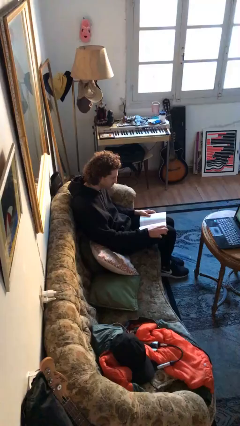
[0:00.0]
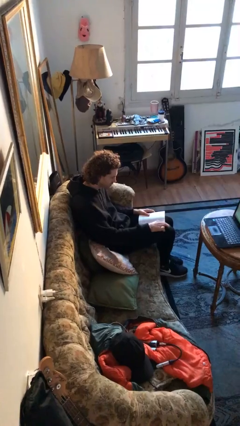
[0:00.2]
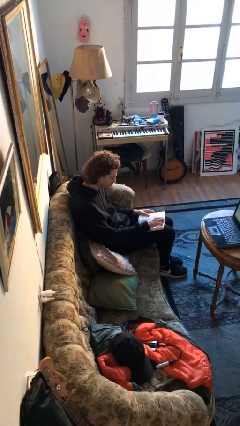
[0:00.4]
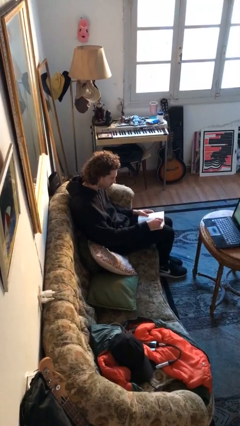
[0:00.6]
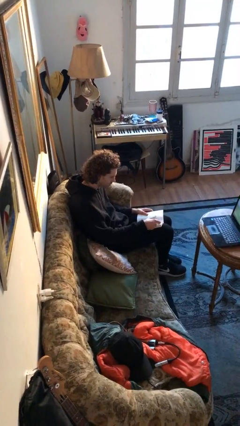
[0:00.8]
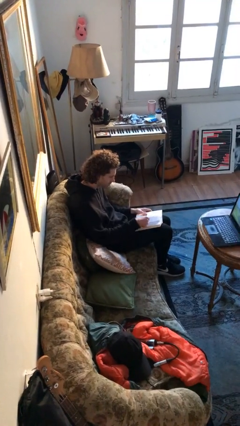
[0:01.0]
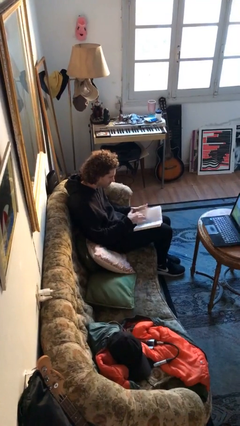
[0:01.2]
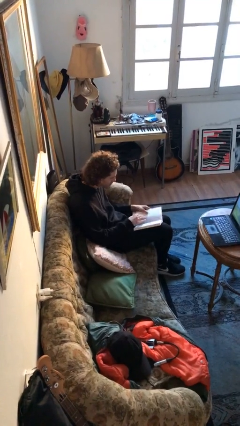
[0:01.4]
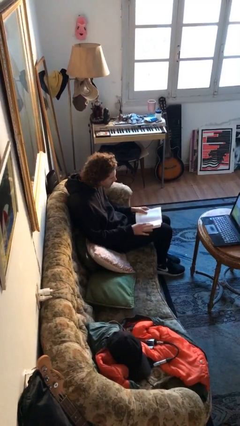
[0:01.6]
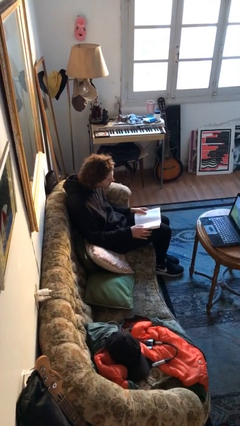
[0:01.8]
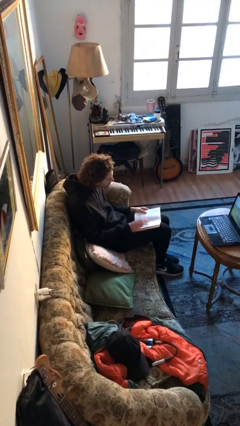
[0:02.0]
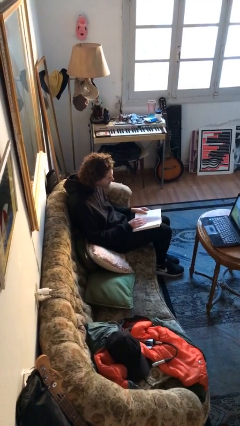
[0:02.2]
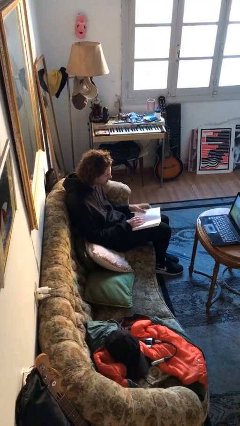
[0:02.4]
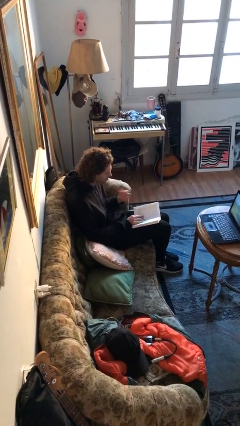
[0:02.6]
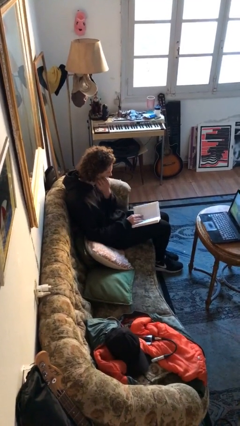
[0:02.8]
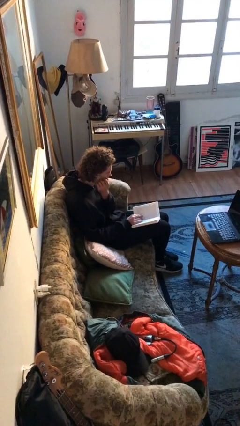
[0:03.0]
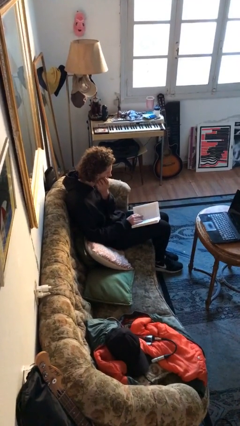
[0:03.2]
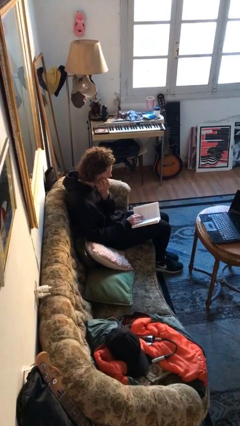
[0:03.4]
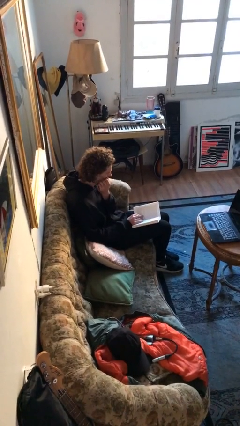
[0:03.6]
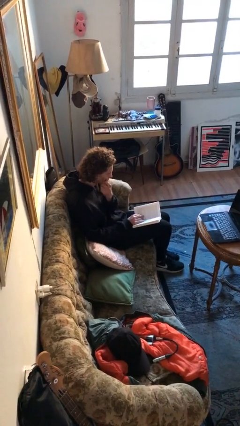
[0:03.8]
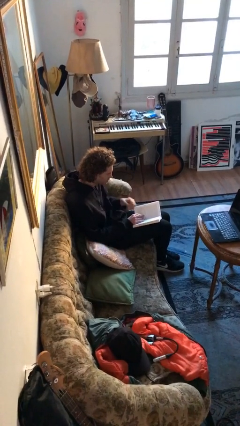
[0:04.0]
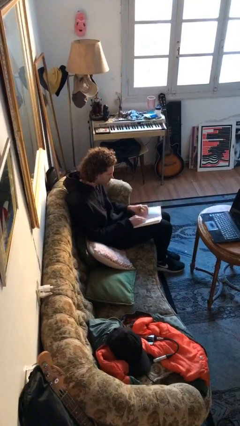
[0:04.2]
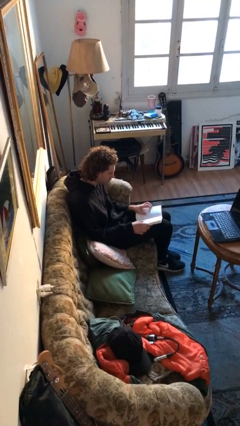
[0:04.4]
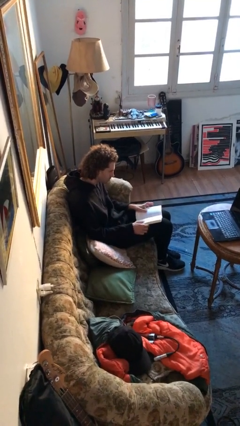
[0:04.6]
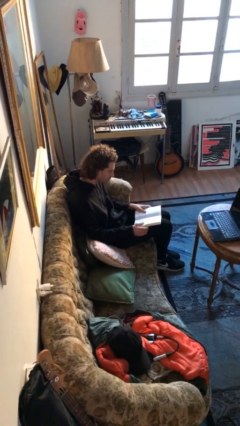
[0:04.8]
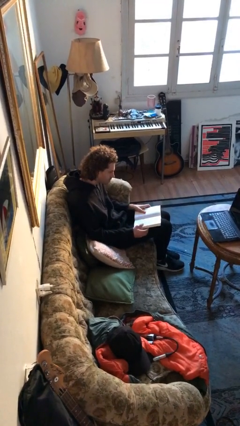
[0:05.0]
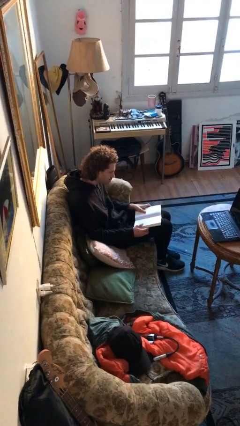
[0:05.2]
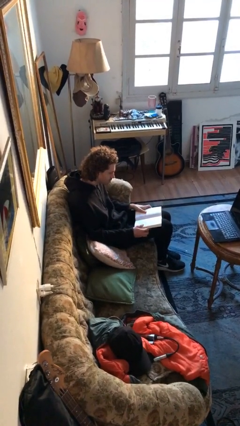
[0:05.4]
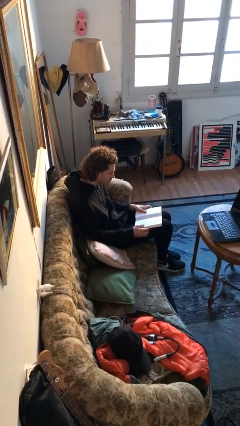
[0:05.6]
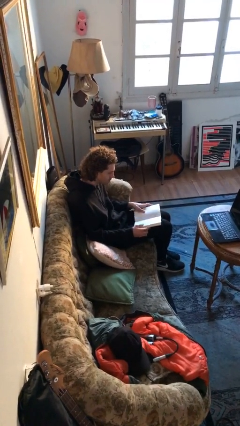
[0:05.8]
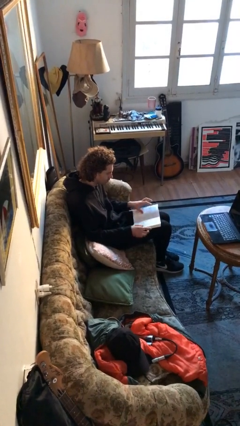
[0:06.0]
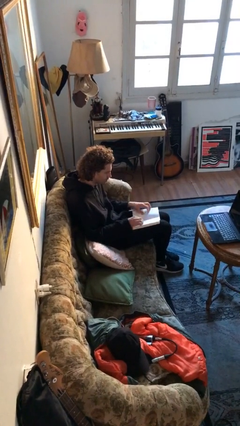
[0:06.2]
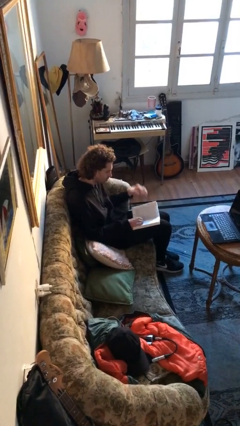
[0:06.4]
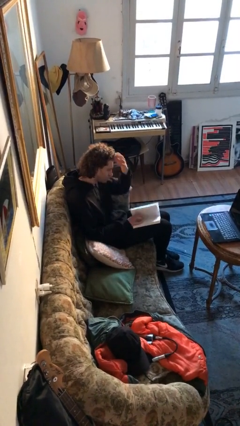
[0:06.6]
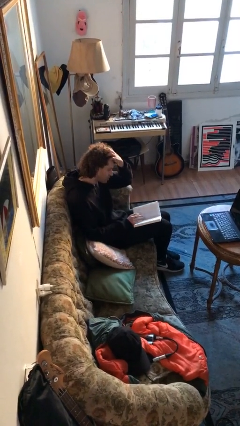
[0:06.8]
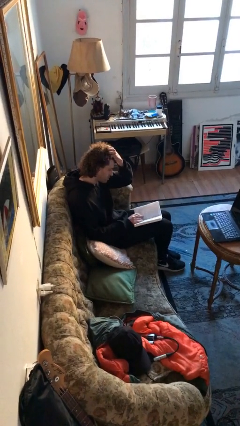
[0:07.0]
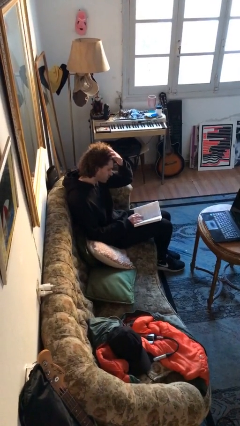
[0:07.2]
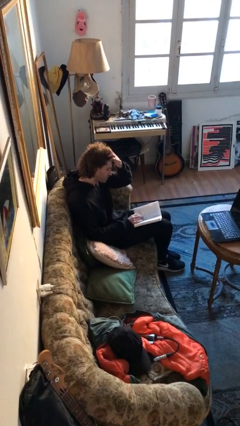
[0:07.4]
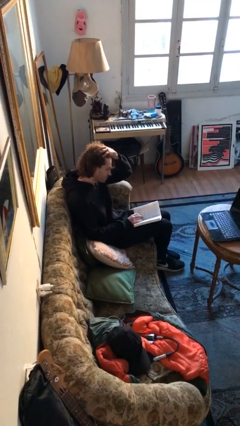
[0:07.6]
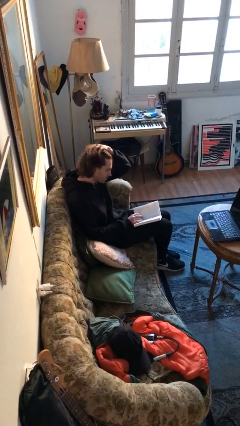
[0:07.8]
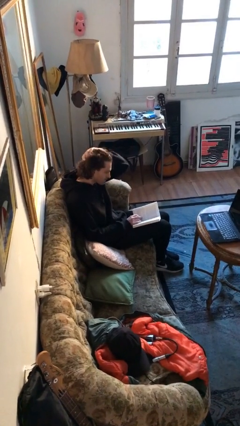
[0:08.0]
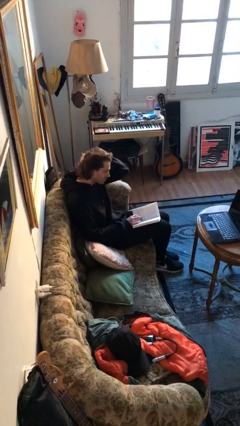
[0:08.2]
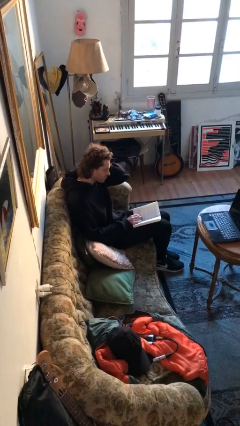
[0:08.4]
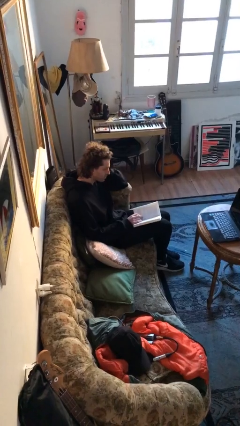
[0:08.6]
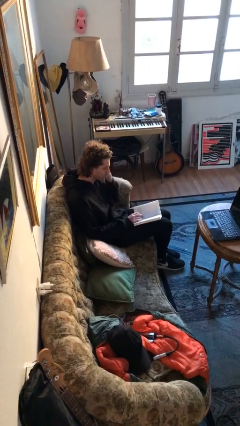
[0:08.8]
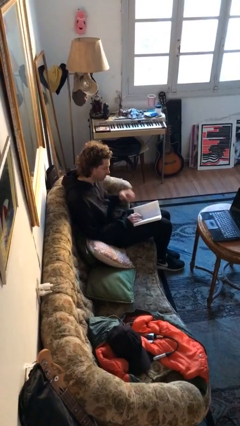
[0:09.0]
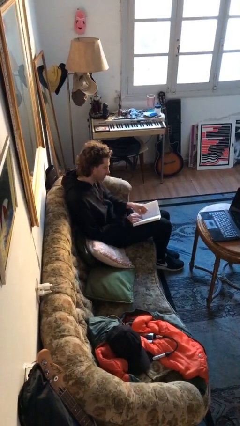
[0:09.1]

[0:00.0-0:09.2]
person reads document

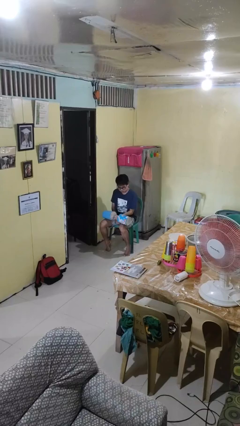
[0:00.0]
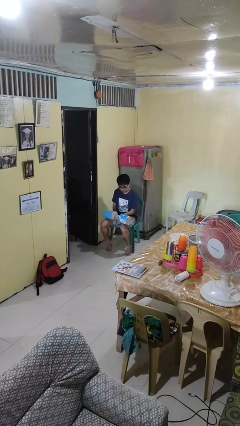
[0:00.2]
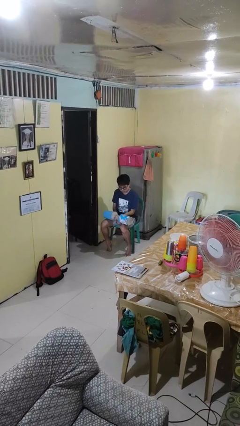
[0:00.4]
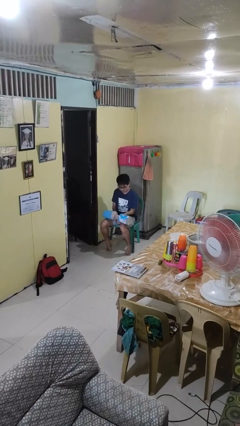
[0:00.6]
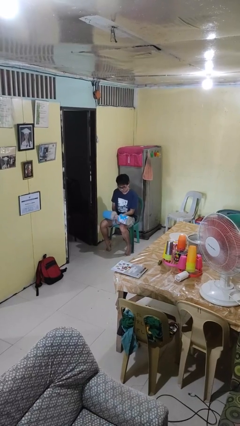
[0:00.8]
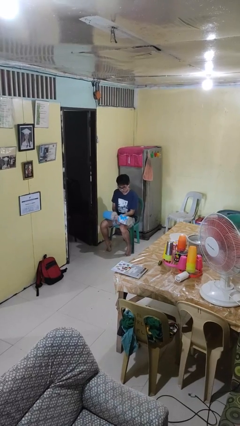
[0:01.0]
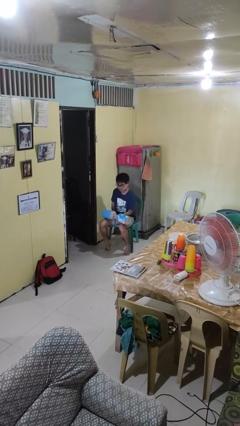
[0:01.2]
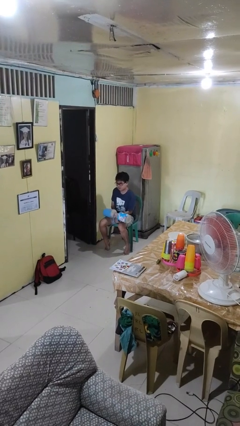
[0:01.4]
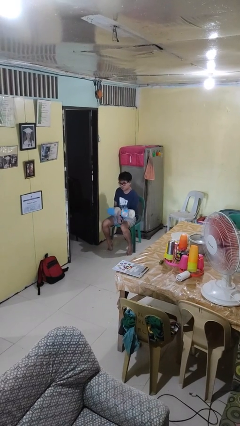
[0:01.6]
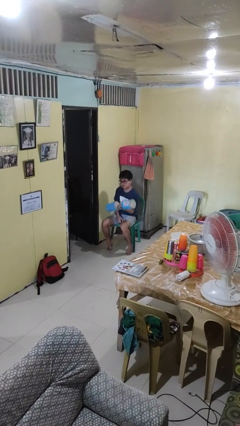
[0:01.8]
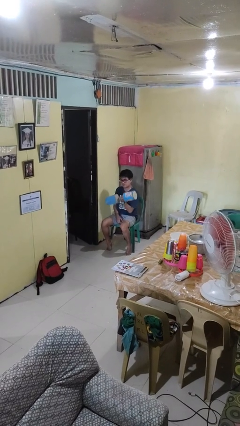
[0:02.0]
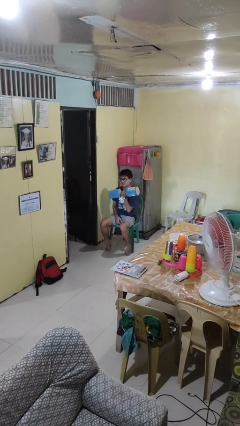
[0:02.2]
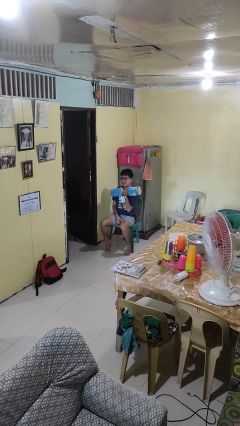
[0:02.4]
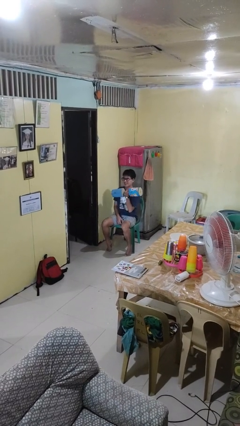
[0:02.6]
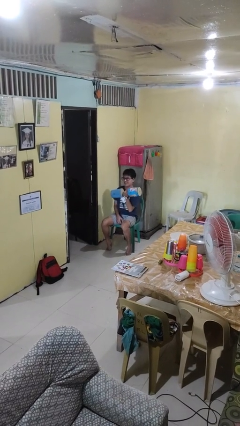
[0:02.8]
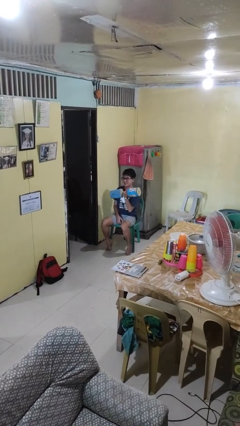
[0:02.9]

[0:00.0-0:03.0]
person lifts dumbbells

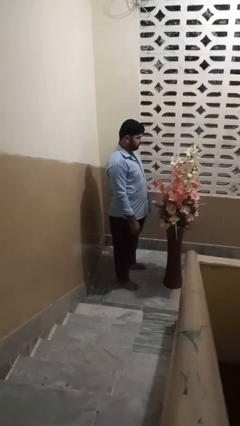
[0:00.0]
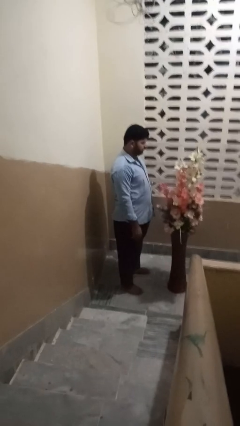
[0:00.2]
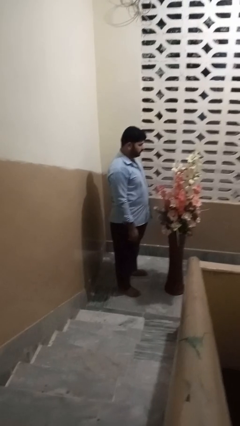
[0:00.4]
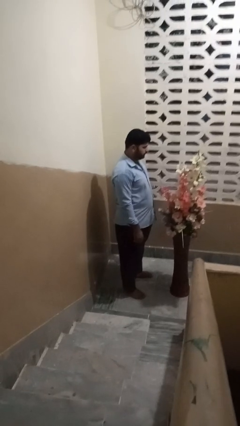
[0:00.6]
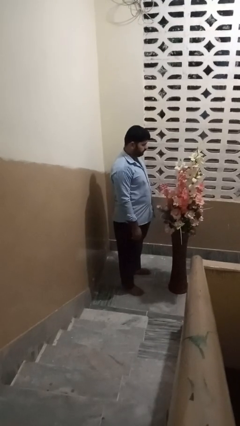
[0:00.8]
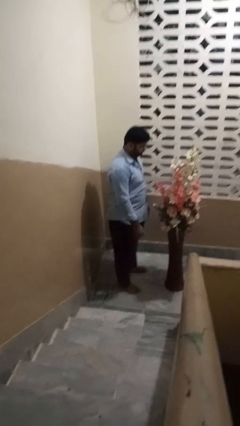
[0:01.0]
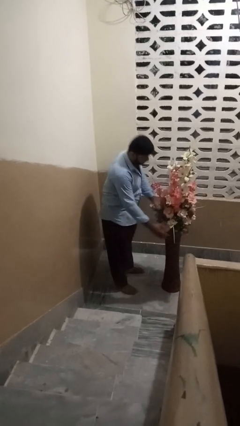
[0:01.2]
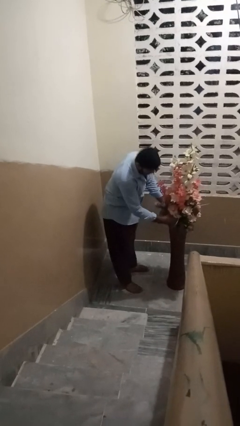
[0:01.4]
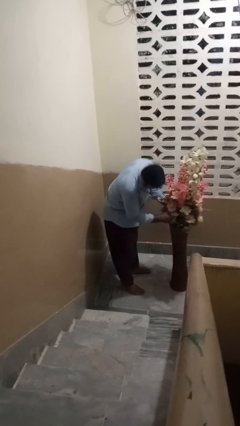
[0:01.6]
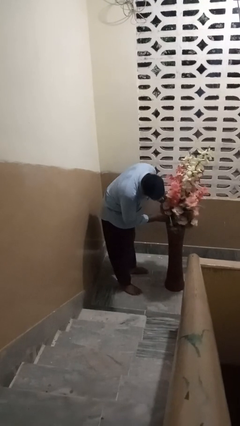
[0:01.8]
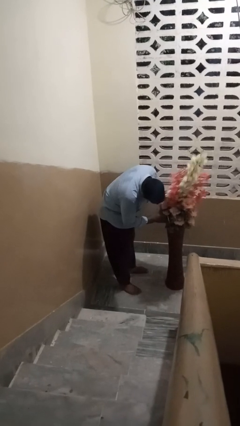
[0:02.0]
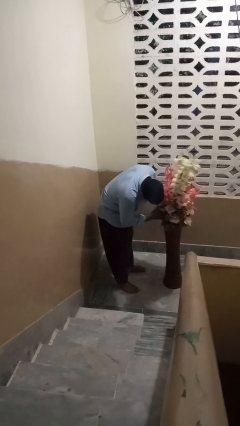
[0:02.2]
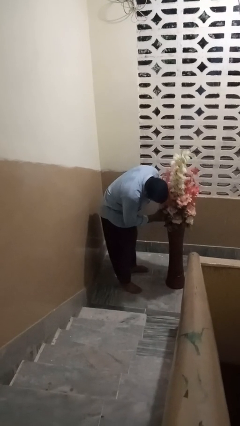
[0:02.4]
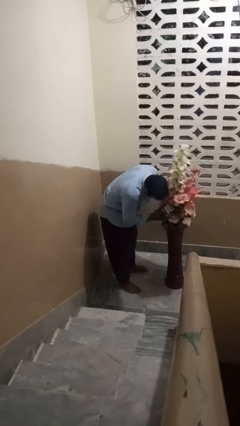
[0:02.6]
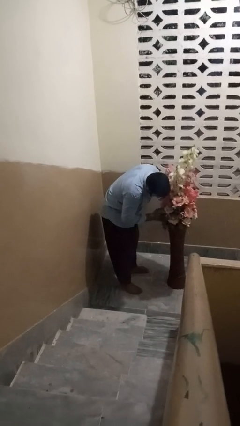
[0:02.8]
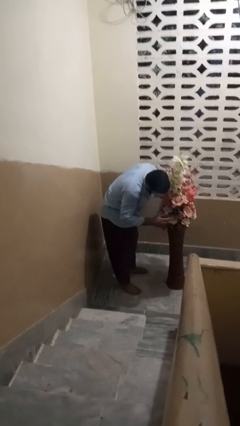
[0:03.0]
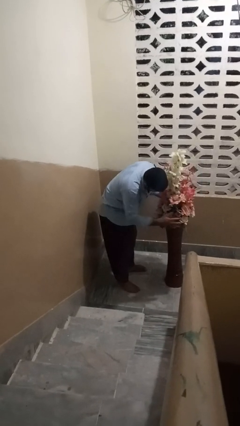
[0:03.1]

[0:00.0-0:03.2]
person arranges flowers in vase

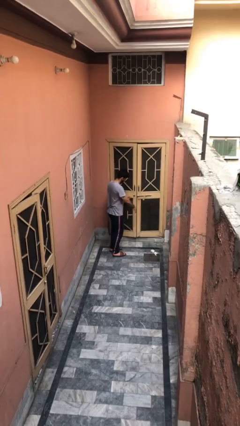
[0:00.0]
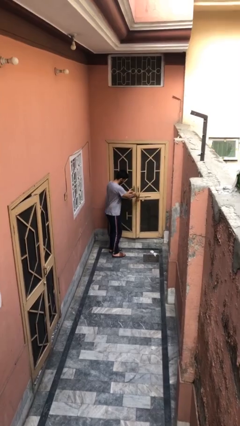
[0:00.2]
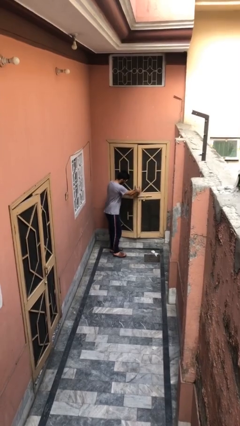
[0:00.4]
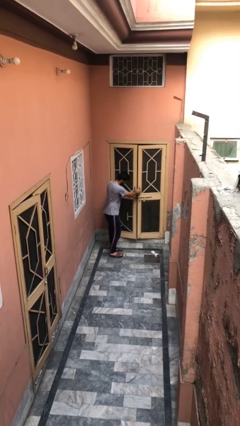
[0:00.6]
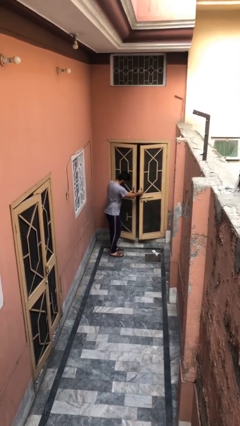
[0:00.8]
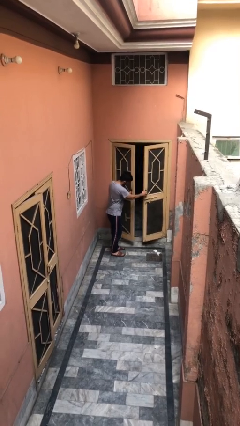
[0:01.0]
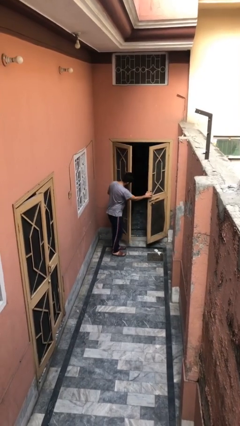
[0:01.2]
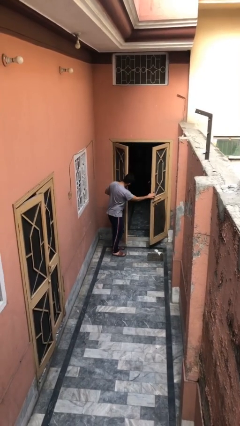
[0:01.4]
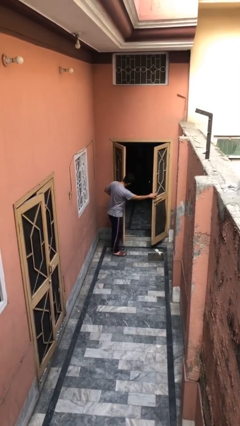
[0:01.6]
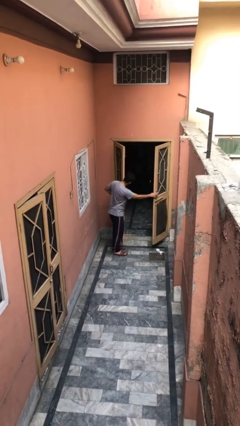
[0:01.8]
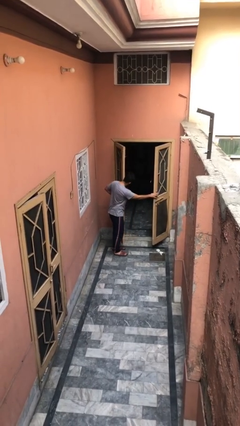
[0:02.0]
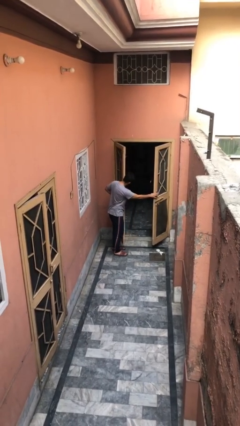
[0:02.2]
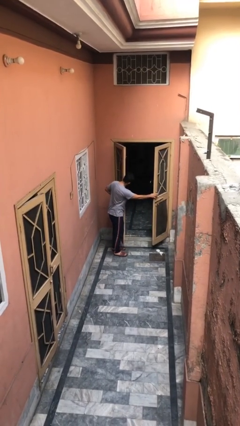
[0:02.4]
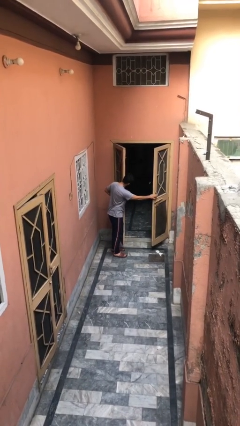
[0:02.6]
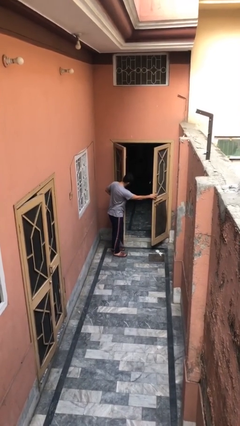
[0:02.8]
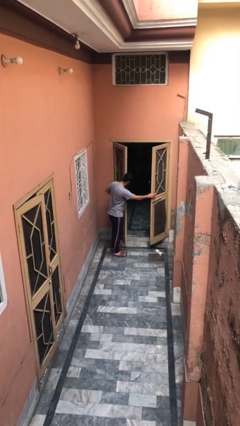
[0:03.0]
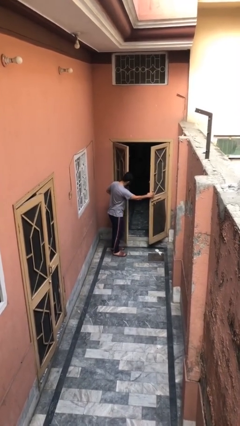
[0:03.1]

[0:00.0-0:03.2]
person opens gate
